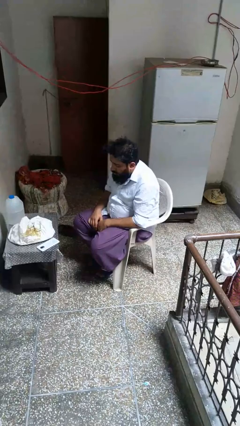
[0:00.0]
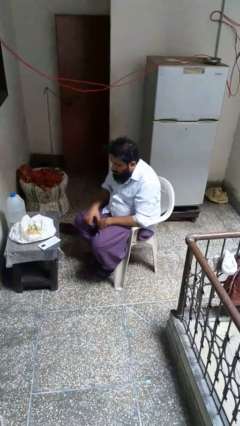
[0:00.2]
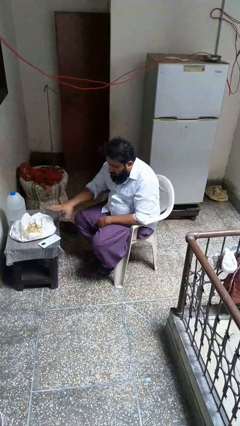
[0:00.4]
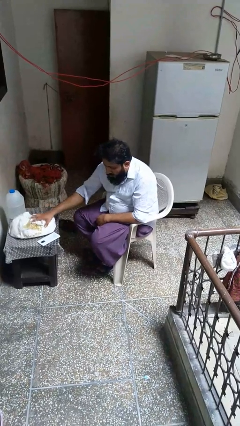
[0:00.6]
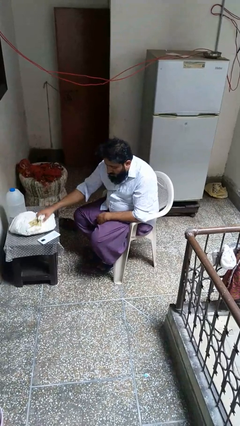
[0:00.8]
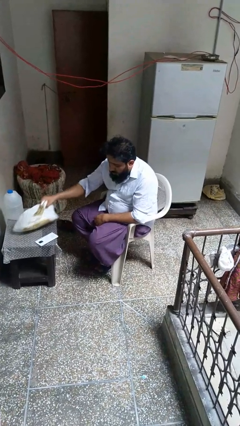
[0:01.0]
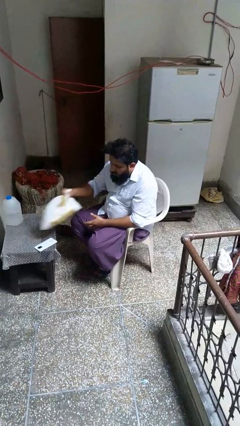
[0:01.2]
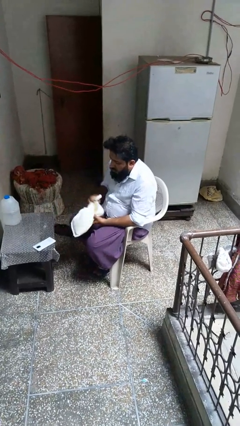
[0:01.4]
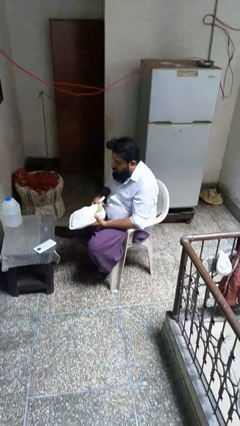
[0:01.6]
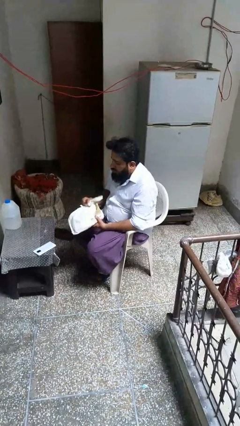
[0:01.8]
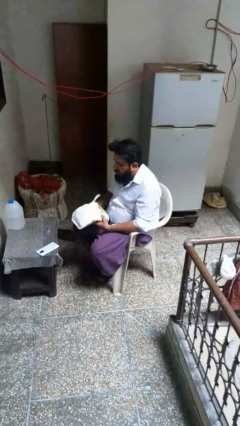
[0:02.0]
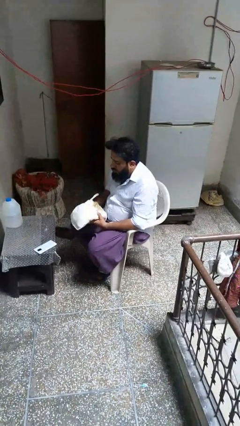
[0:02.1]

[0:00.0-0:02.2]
person picks up object from table

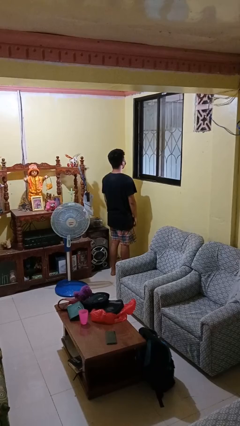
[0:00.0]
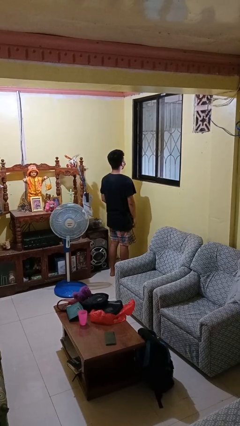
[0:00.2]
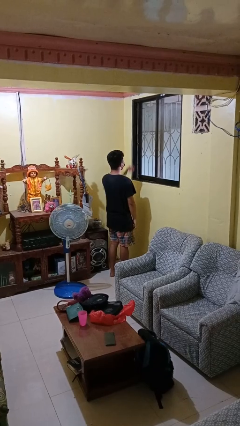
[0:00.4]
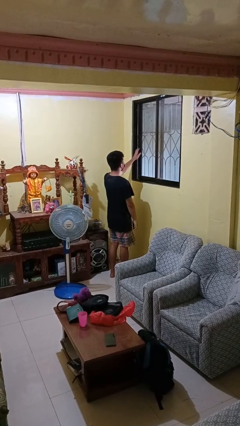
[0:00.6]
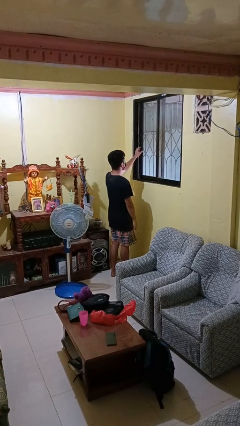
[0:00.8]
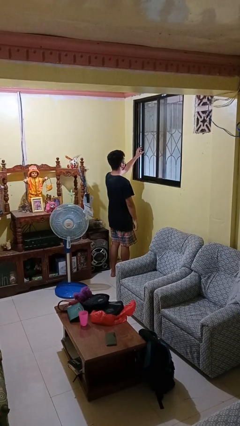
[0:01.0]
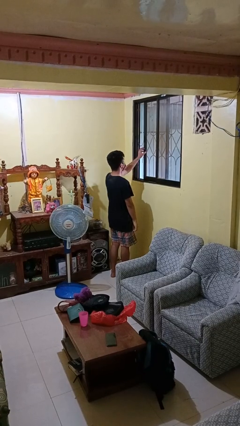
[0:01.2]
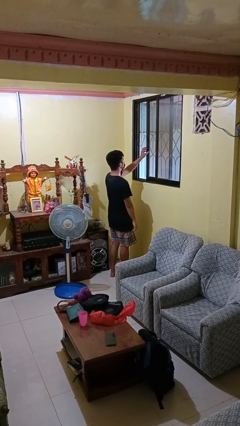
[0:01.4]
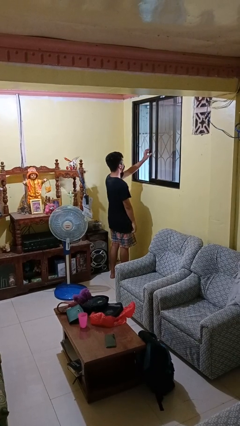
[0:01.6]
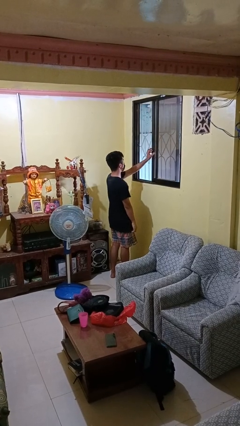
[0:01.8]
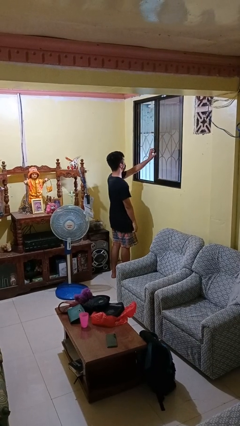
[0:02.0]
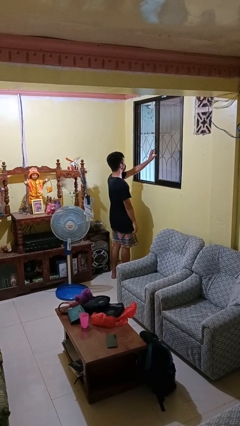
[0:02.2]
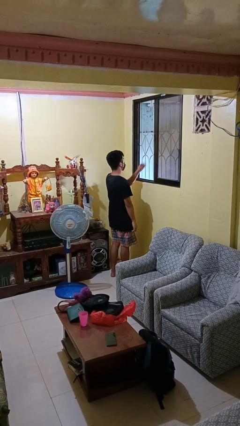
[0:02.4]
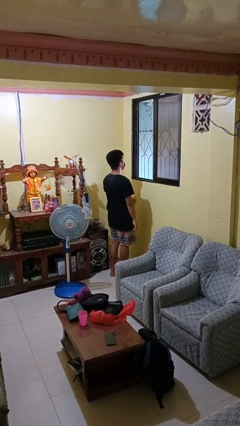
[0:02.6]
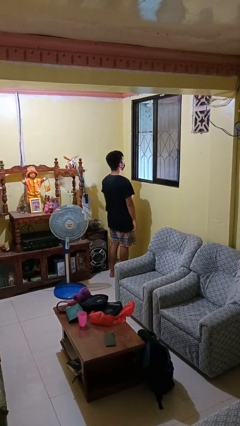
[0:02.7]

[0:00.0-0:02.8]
person opens home window

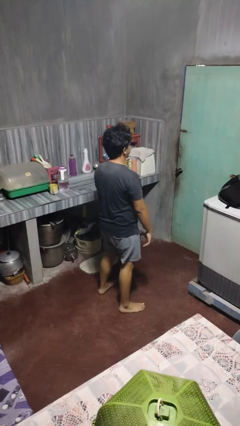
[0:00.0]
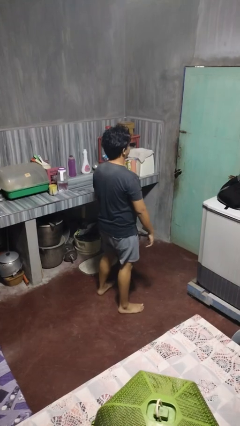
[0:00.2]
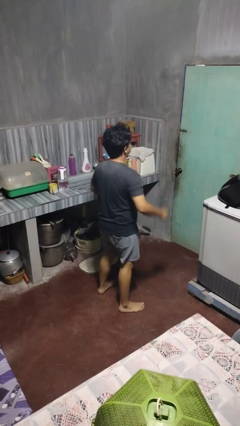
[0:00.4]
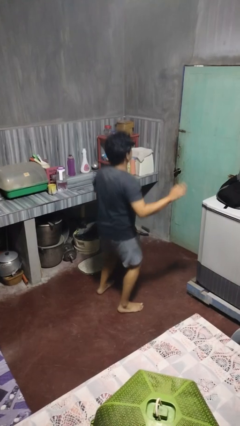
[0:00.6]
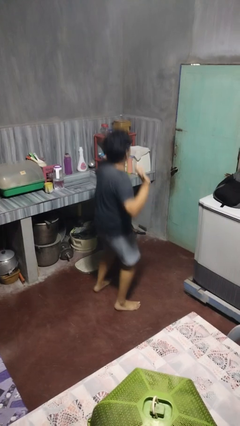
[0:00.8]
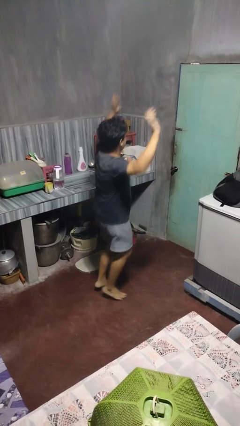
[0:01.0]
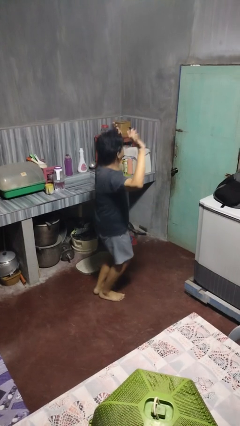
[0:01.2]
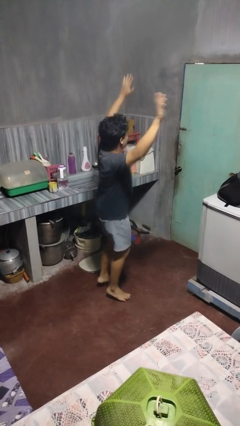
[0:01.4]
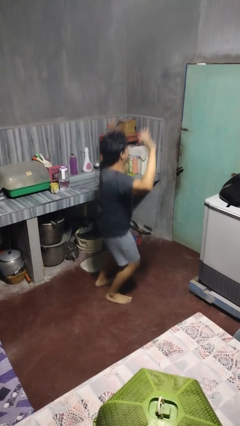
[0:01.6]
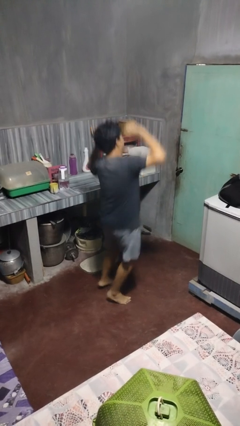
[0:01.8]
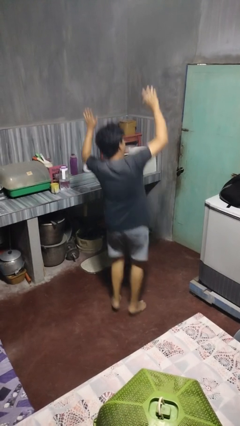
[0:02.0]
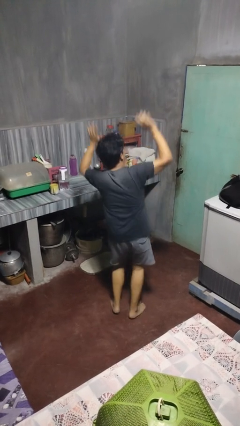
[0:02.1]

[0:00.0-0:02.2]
person dances in place

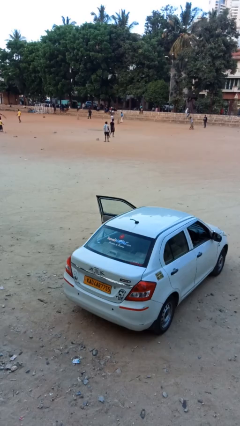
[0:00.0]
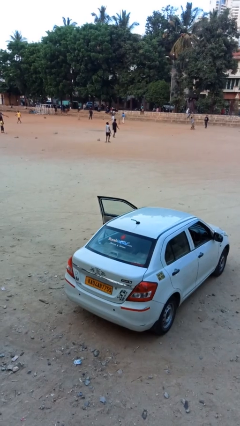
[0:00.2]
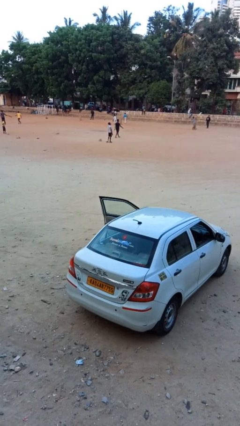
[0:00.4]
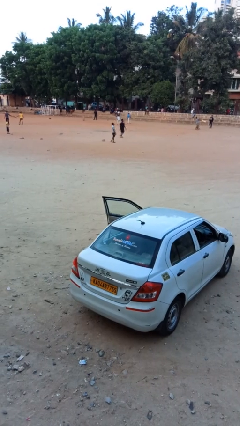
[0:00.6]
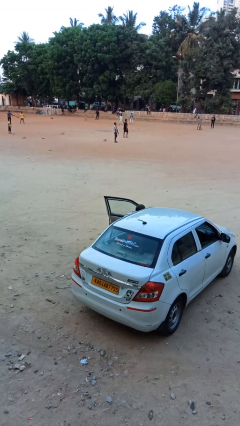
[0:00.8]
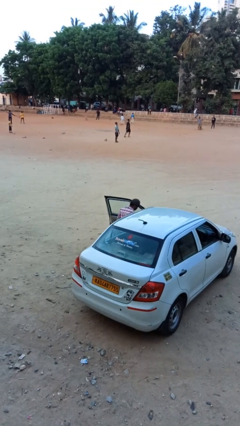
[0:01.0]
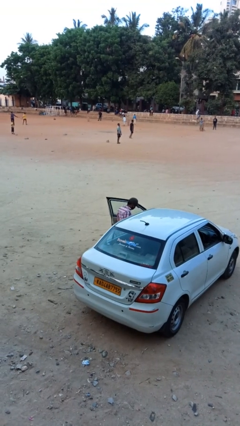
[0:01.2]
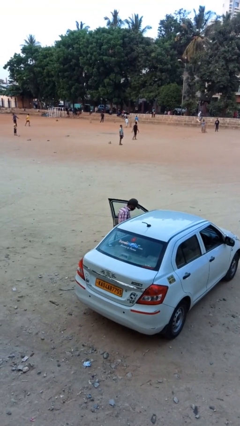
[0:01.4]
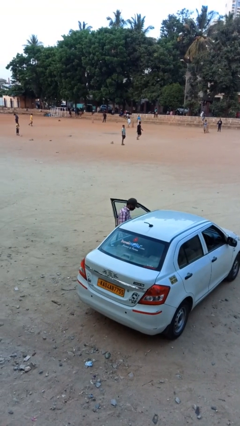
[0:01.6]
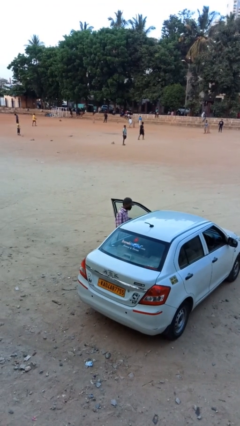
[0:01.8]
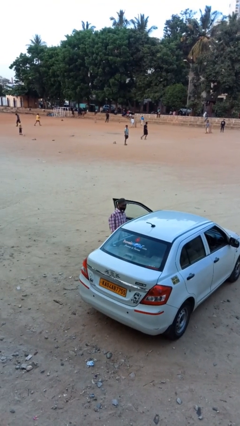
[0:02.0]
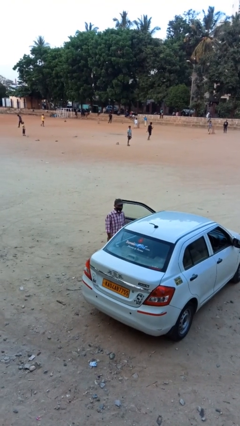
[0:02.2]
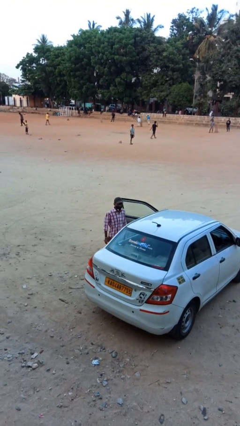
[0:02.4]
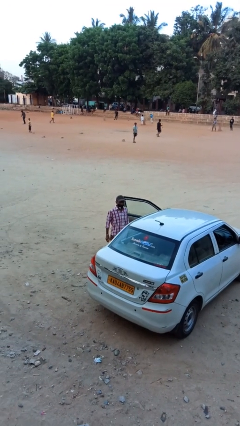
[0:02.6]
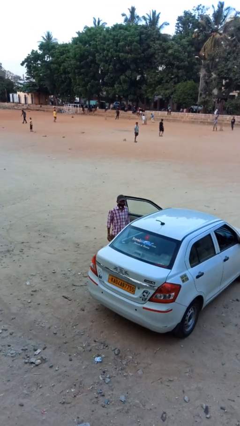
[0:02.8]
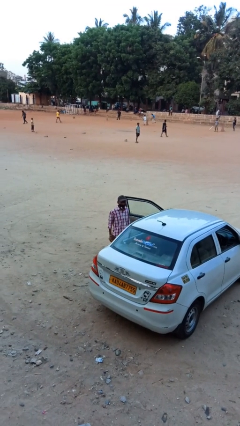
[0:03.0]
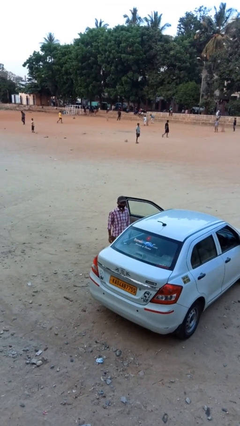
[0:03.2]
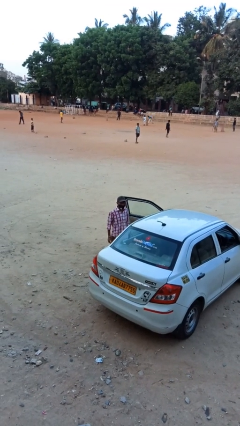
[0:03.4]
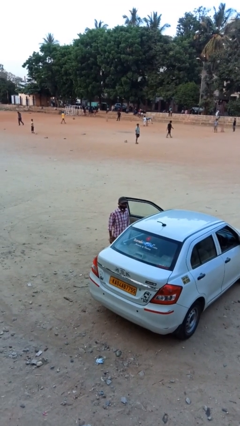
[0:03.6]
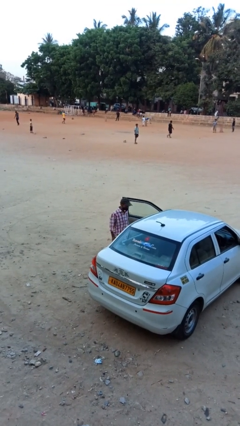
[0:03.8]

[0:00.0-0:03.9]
person exits car

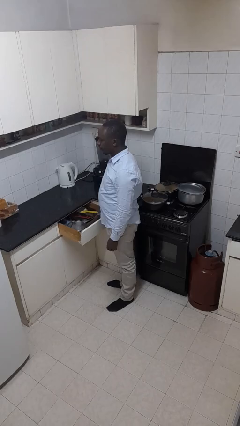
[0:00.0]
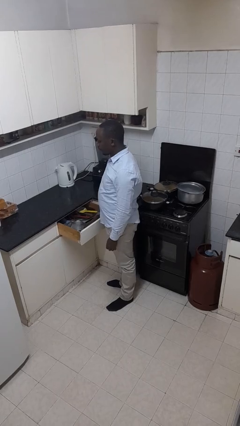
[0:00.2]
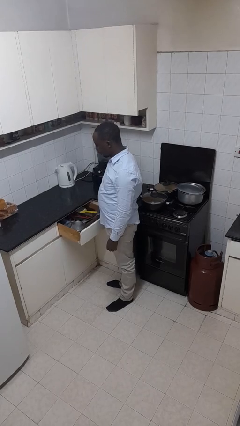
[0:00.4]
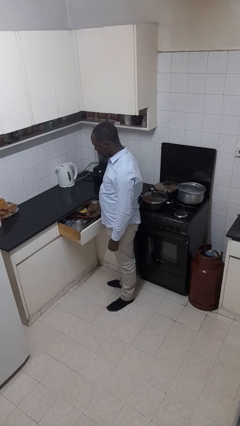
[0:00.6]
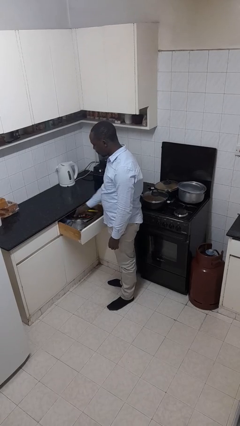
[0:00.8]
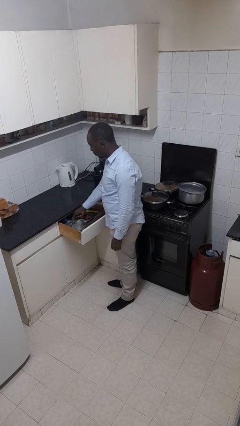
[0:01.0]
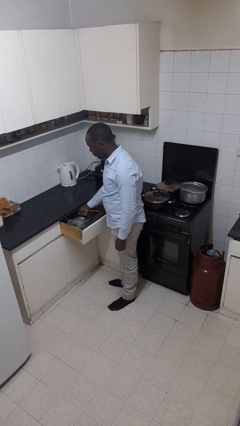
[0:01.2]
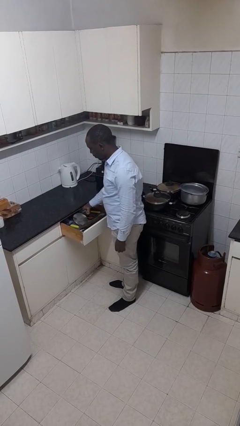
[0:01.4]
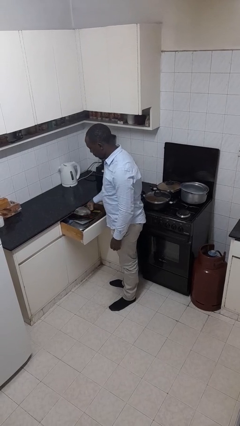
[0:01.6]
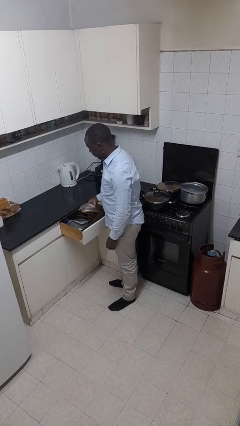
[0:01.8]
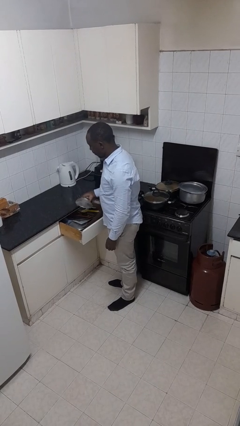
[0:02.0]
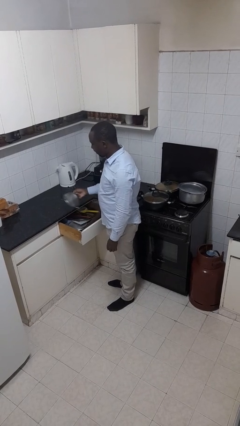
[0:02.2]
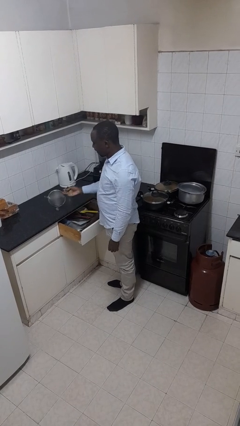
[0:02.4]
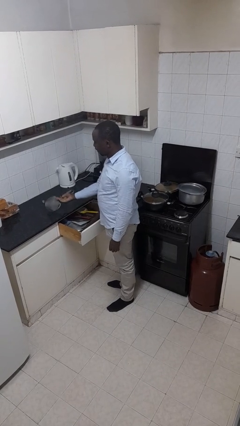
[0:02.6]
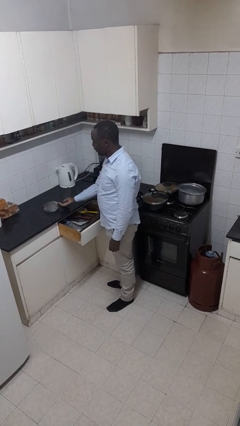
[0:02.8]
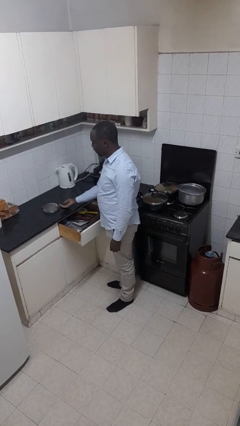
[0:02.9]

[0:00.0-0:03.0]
person takes object from kitchen drawer

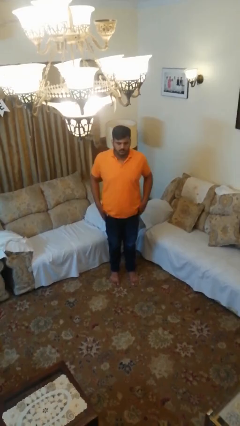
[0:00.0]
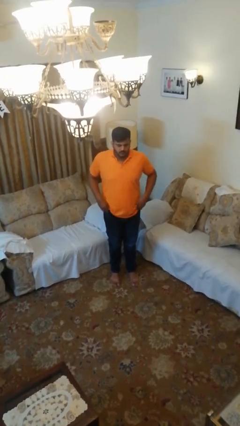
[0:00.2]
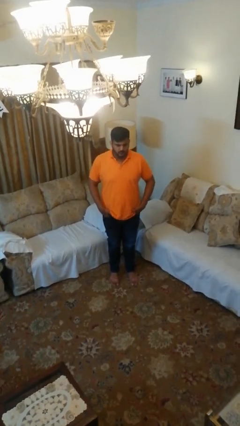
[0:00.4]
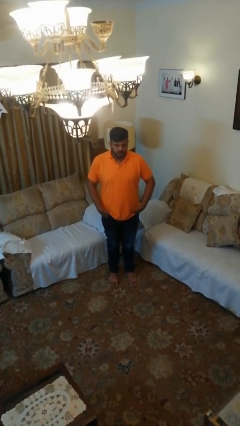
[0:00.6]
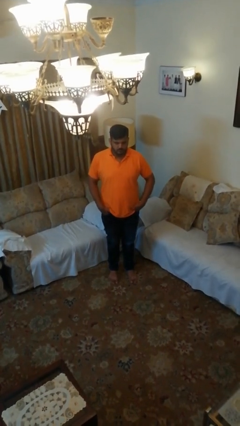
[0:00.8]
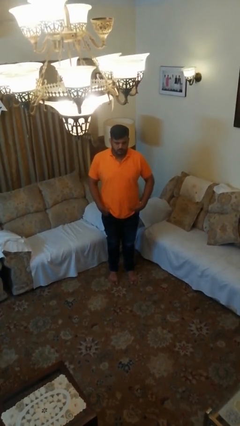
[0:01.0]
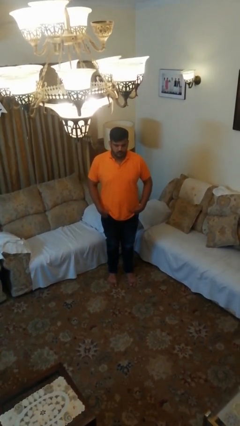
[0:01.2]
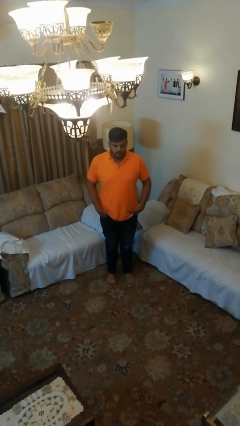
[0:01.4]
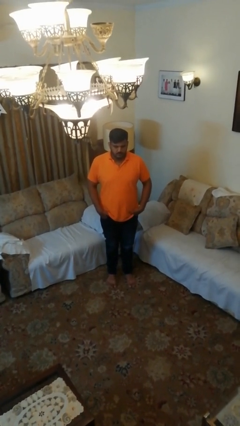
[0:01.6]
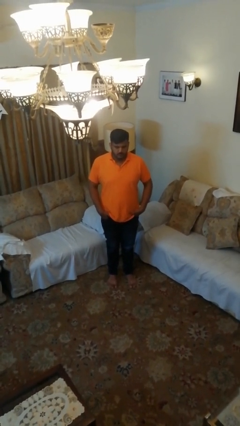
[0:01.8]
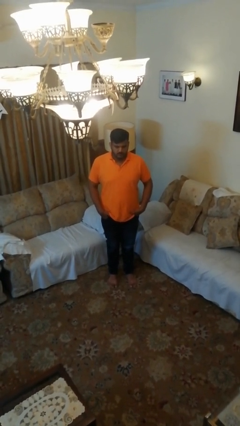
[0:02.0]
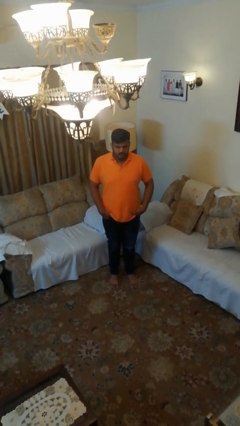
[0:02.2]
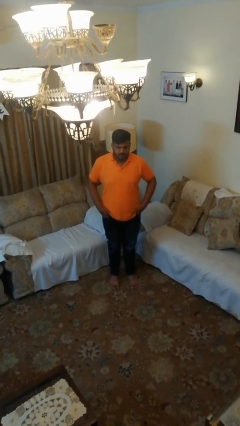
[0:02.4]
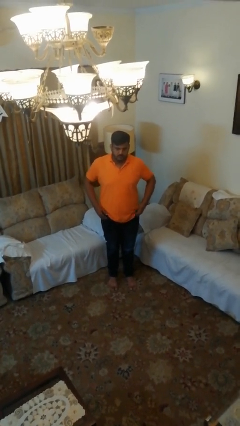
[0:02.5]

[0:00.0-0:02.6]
person puts hands in back pockets

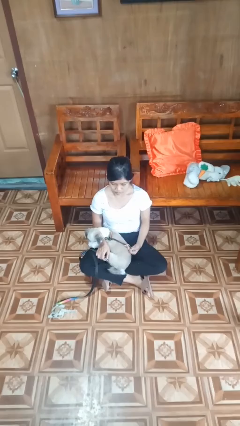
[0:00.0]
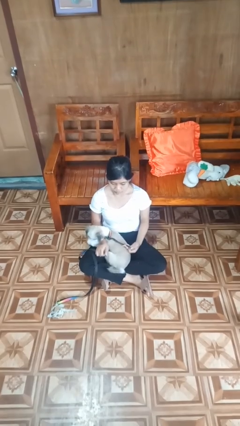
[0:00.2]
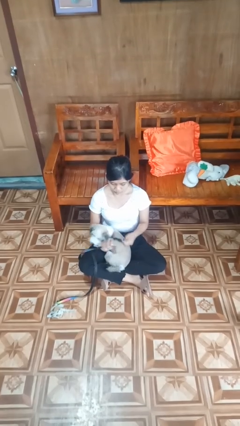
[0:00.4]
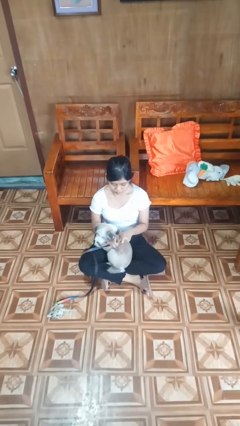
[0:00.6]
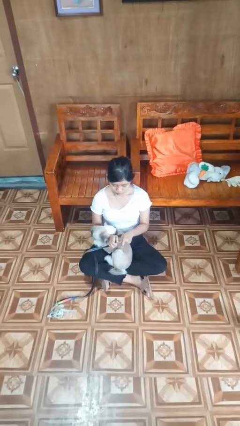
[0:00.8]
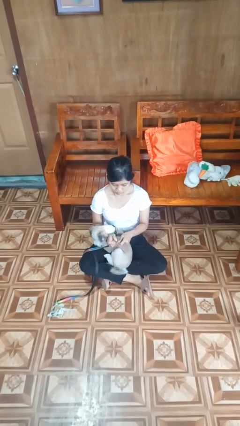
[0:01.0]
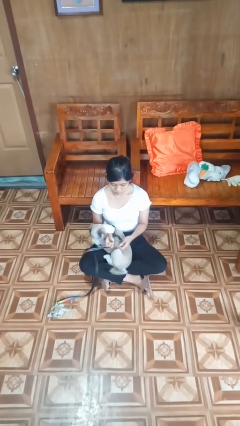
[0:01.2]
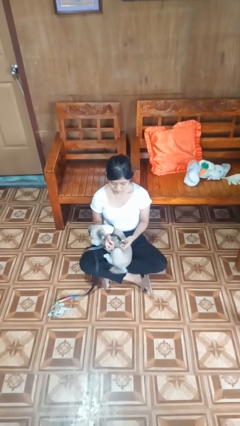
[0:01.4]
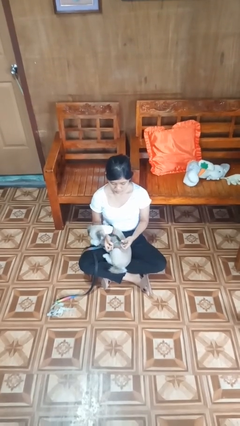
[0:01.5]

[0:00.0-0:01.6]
person attaches leash to dog
